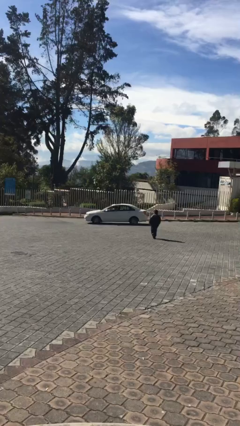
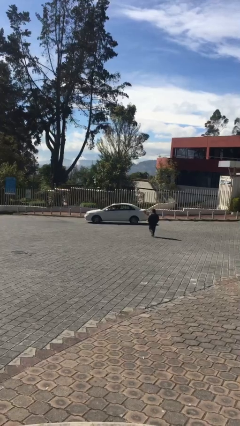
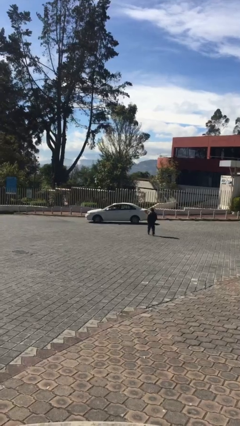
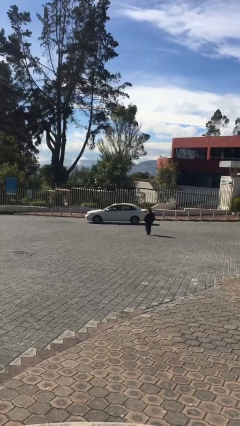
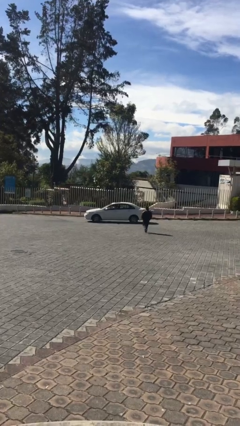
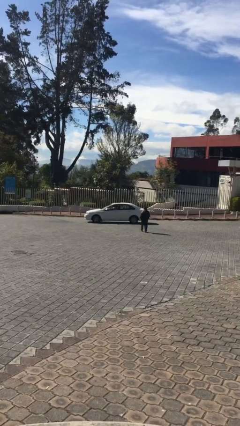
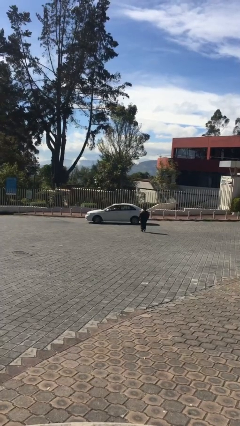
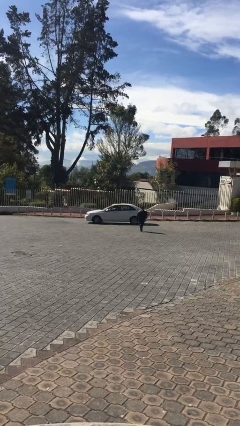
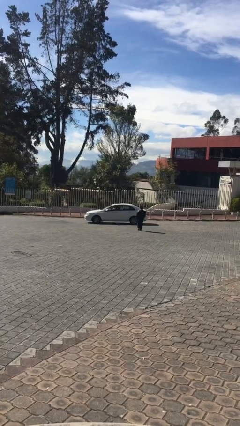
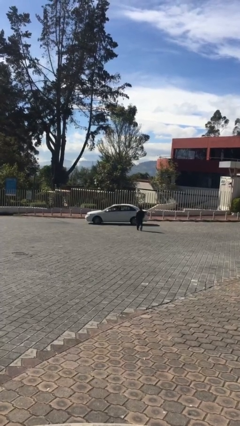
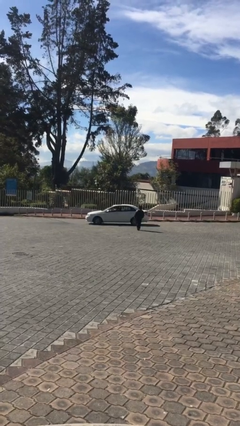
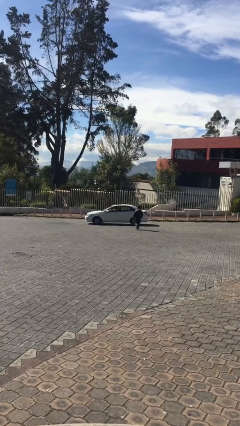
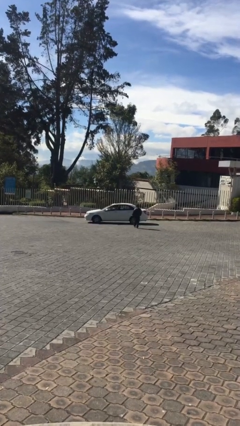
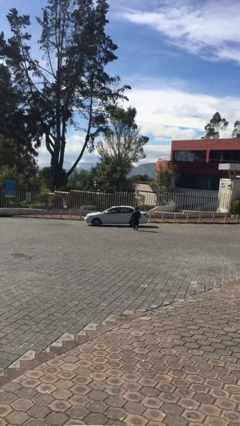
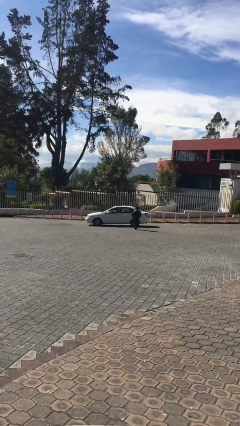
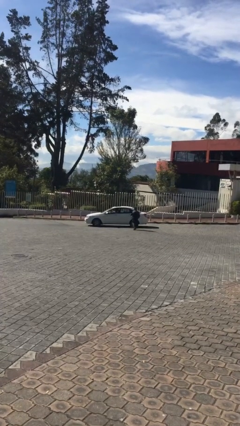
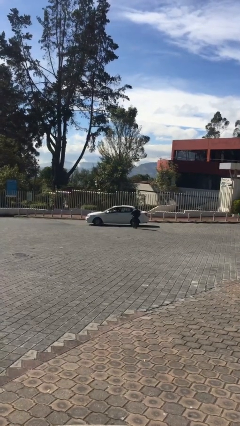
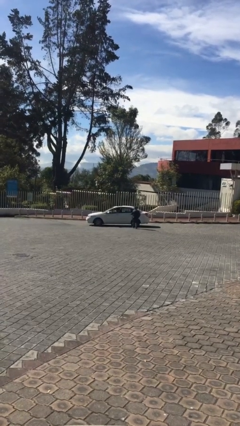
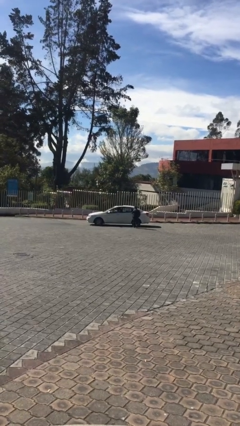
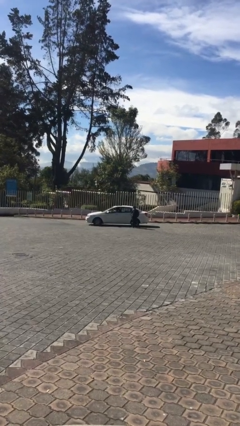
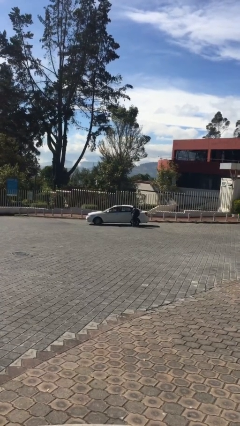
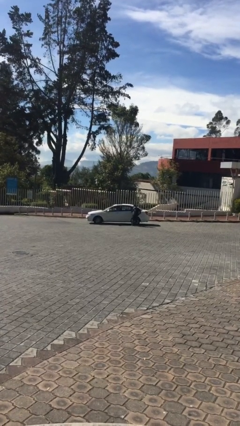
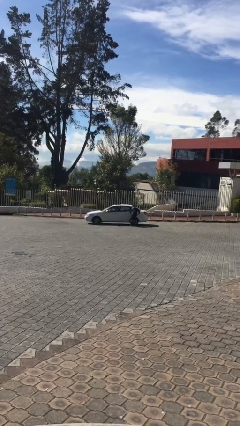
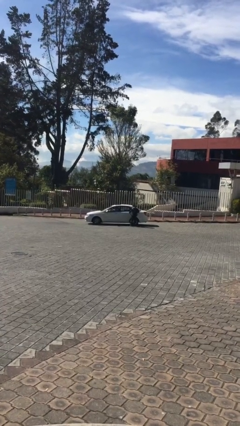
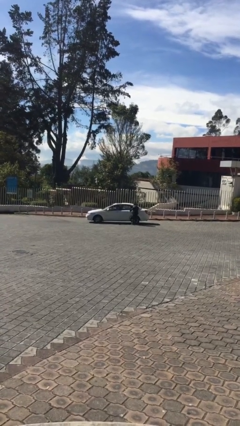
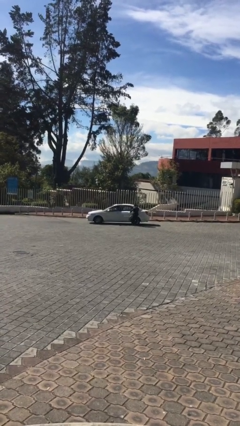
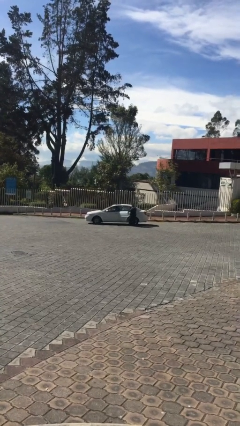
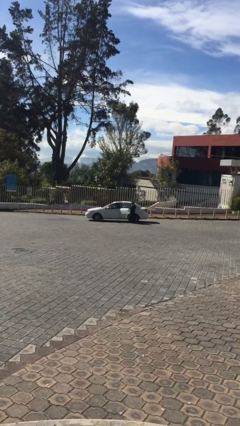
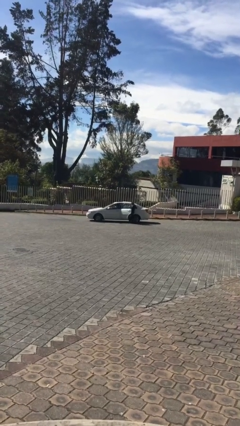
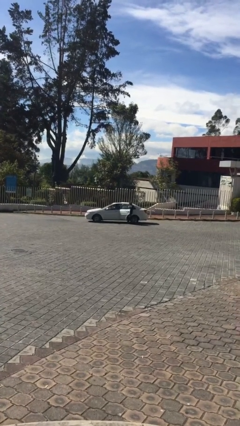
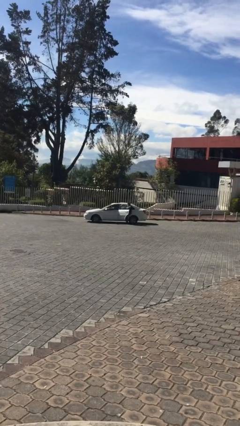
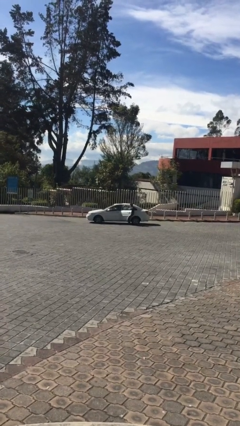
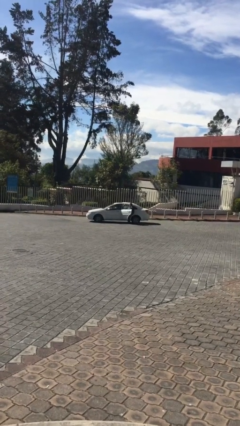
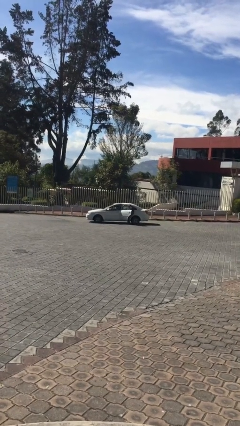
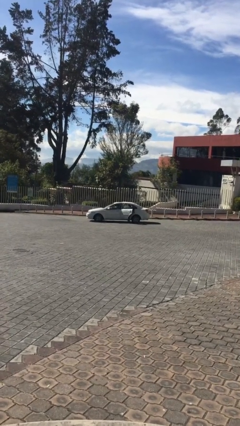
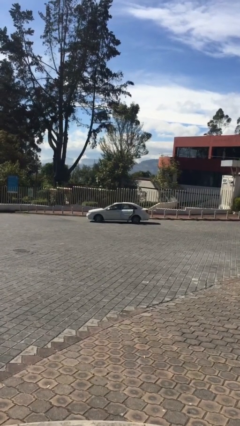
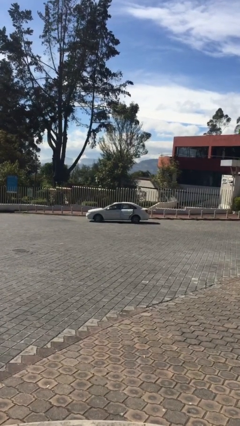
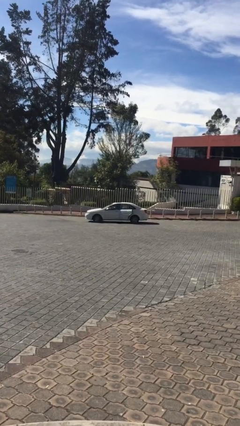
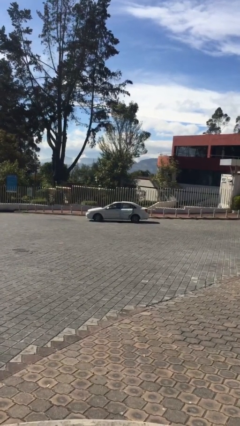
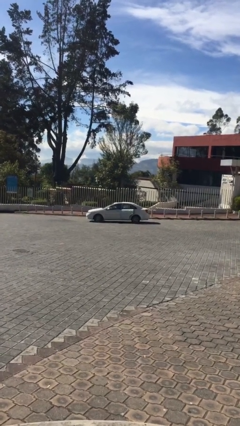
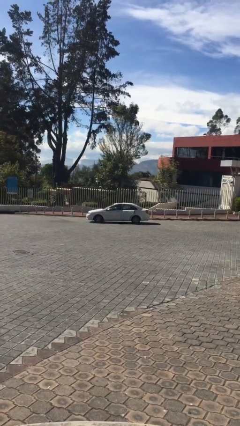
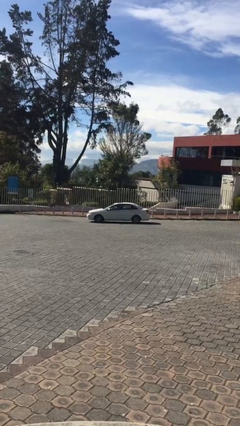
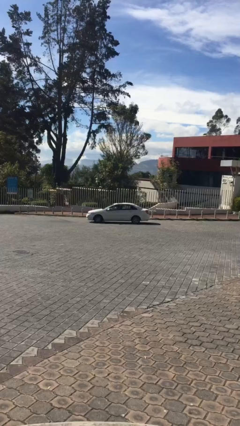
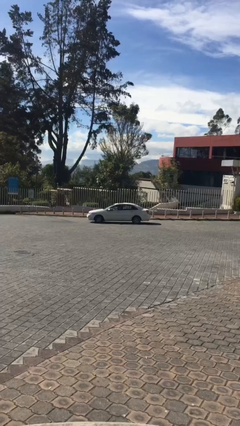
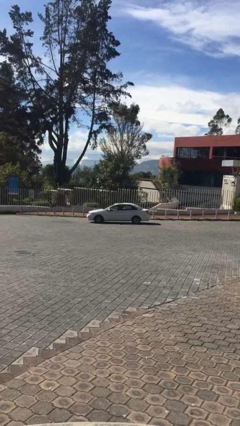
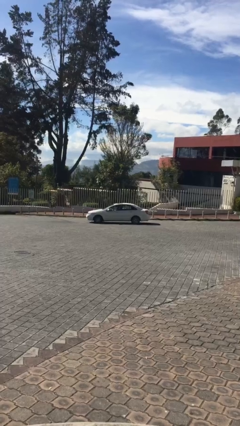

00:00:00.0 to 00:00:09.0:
car picks up person

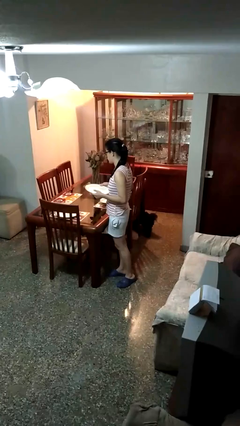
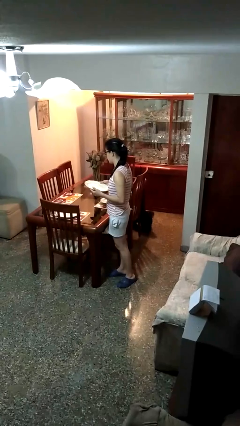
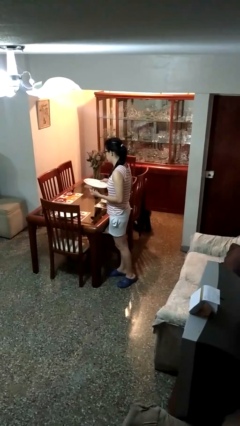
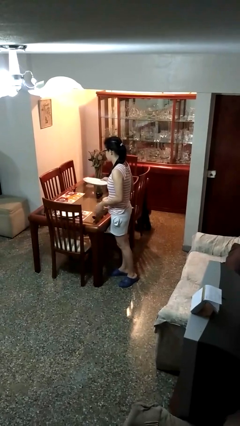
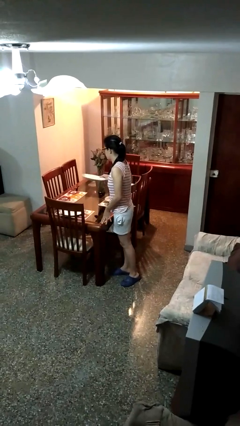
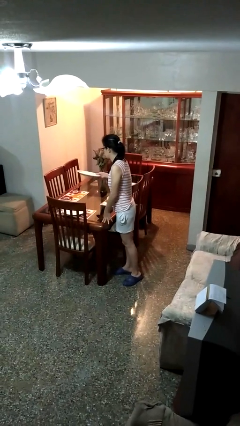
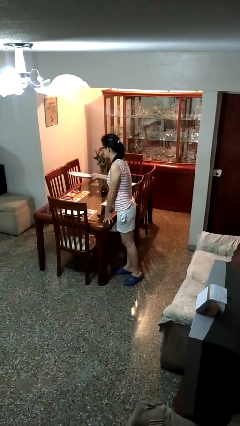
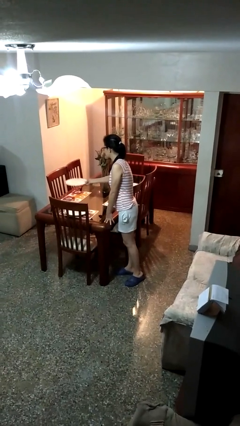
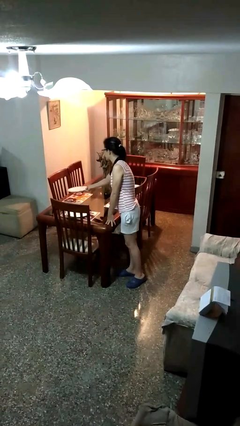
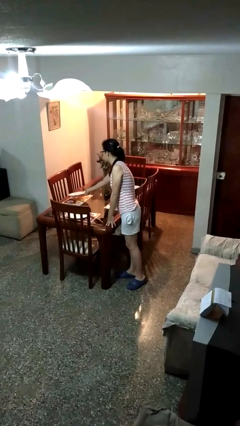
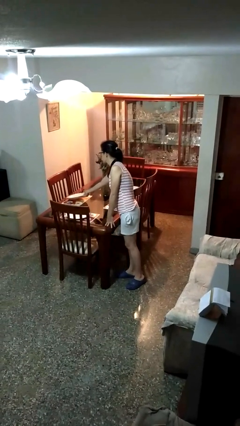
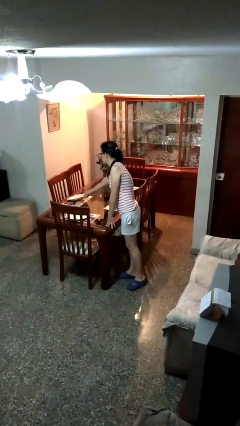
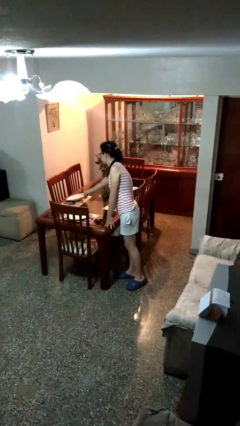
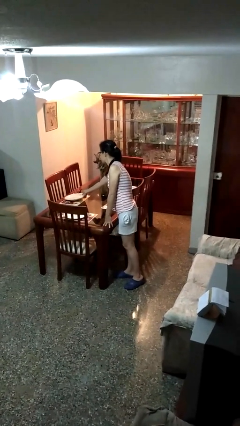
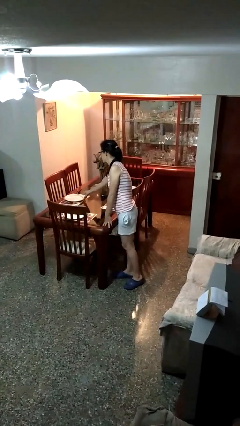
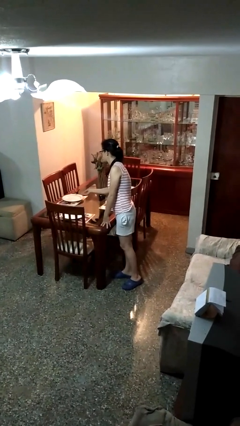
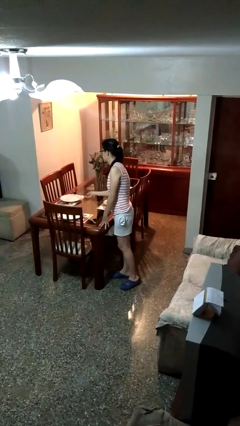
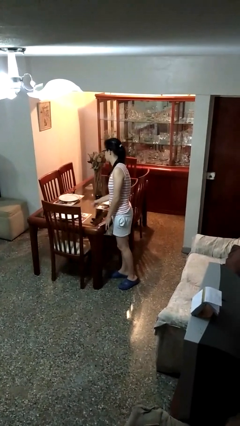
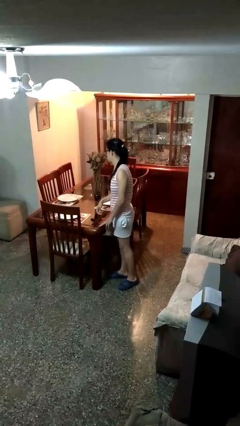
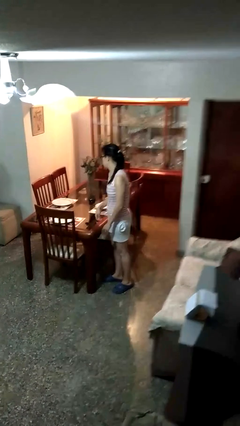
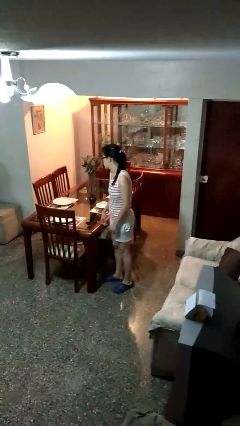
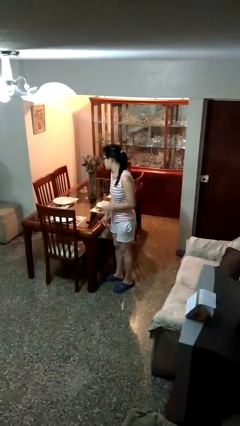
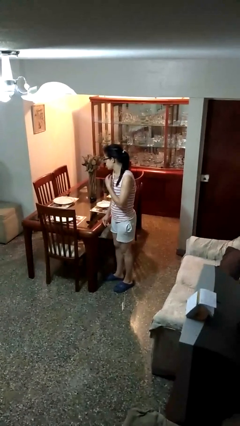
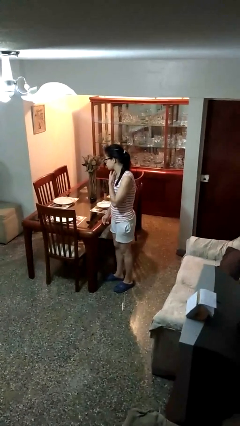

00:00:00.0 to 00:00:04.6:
person sets table

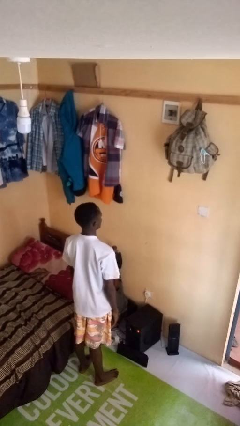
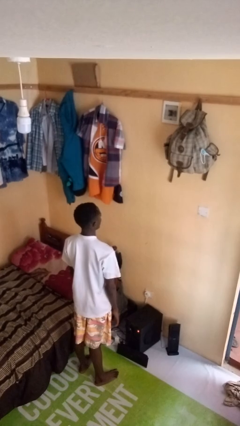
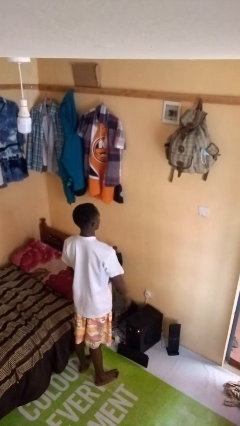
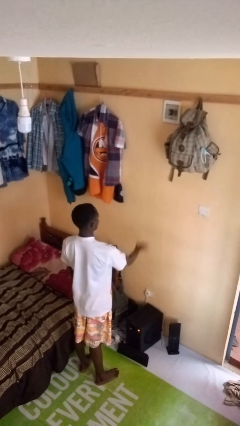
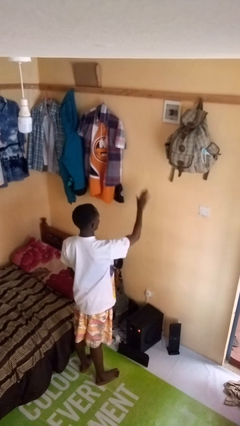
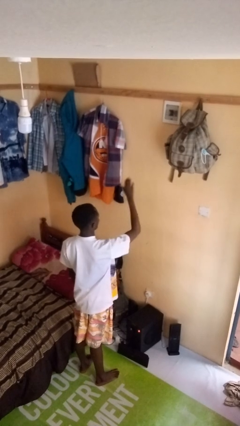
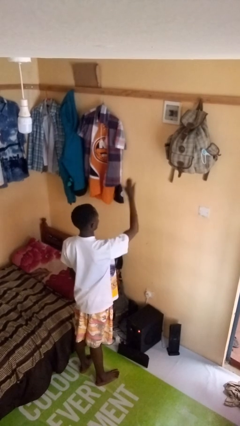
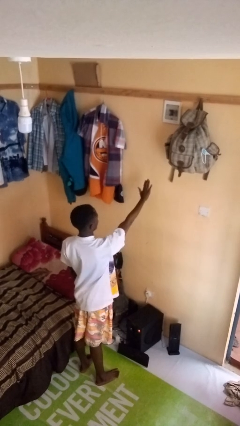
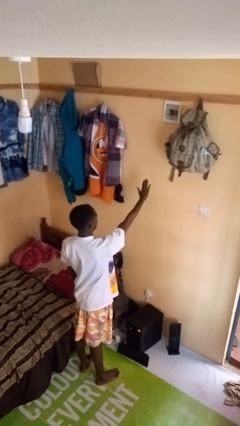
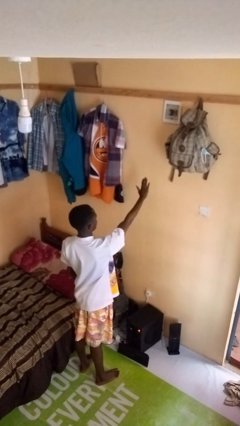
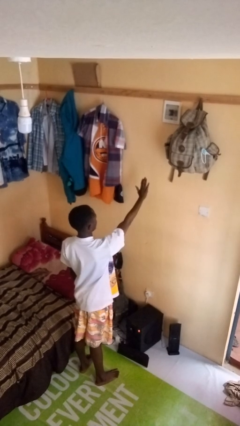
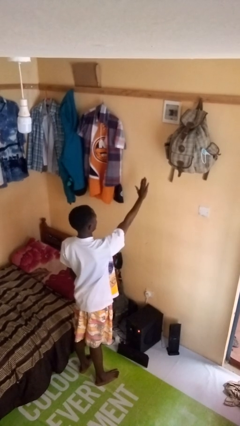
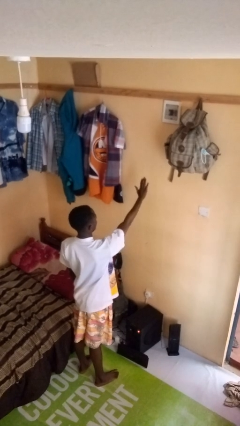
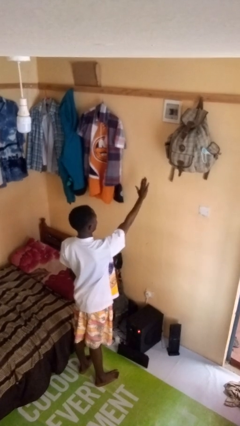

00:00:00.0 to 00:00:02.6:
person gestures stop

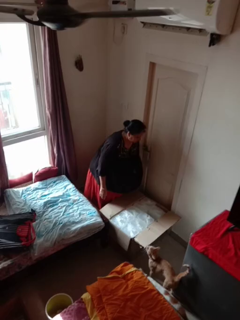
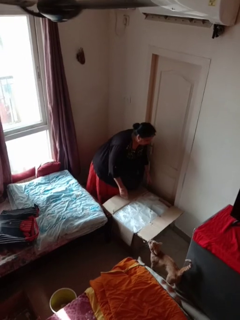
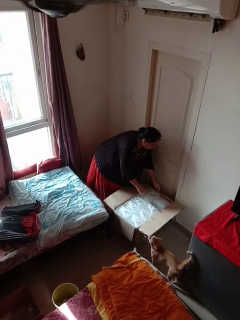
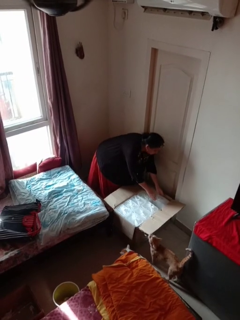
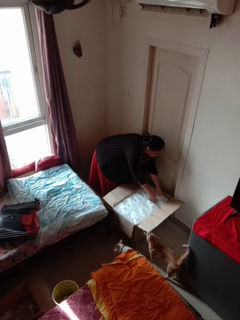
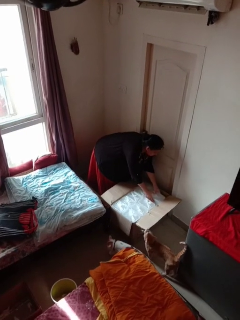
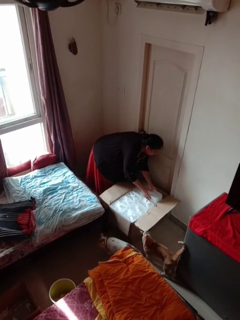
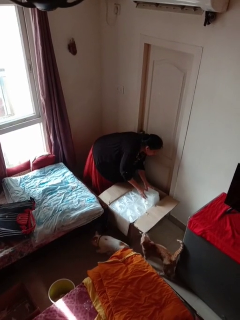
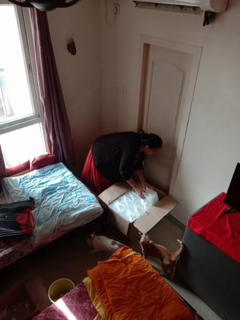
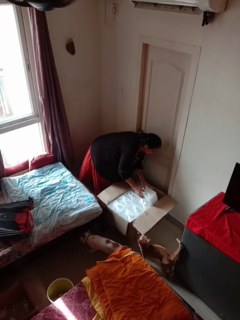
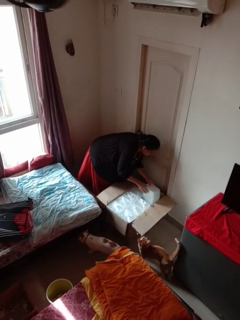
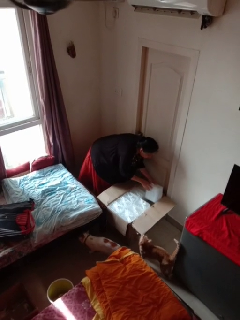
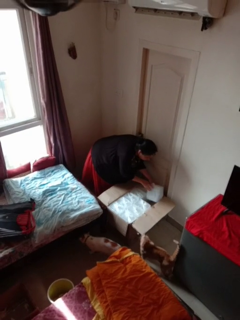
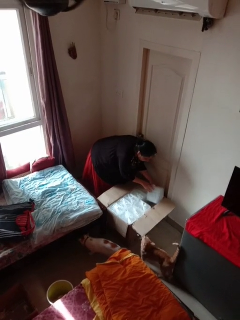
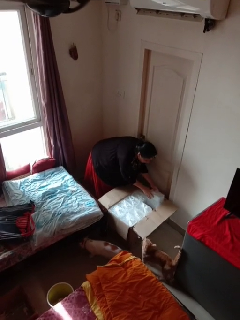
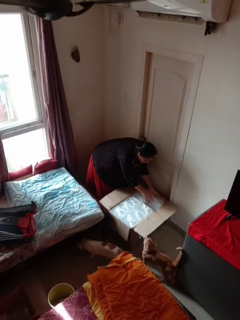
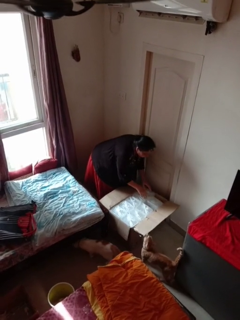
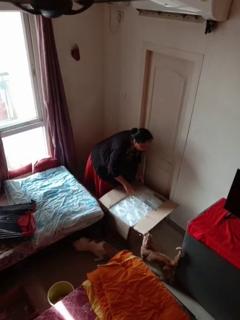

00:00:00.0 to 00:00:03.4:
person searches in box
